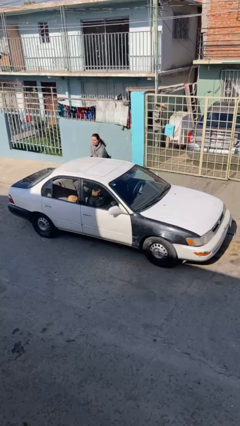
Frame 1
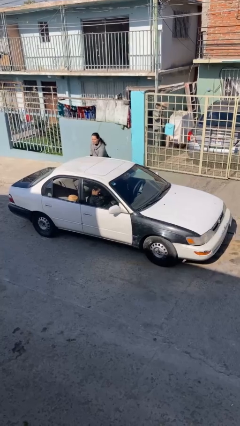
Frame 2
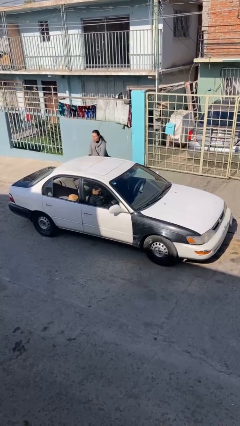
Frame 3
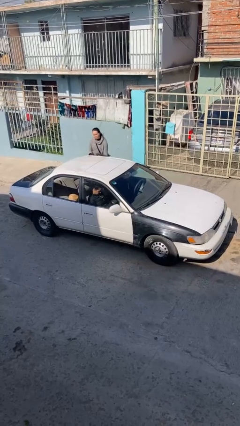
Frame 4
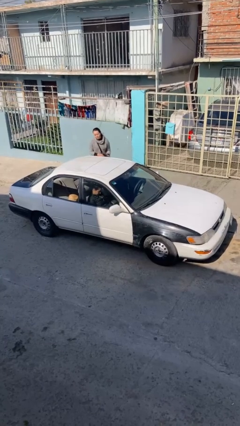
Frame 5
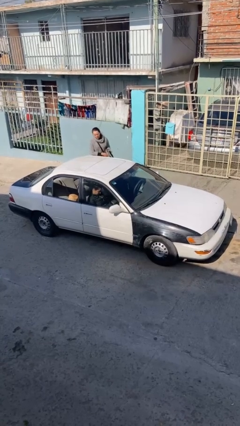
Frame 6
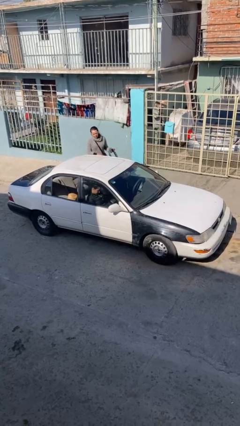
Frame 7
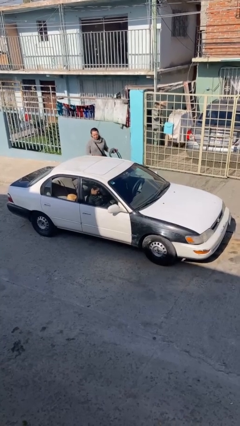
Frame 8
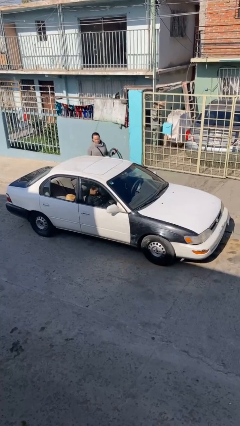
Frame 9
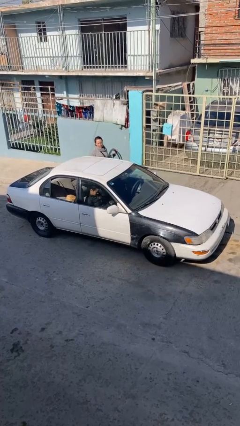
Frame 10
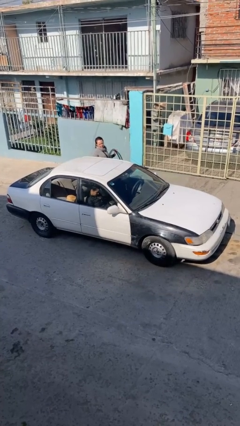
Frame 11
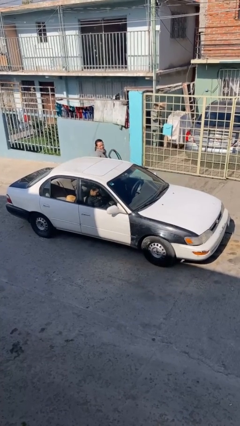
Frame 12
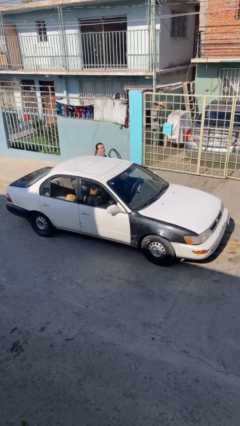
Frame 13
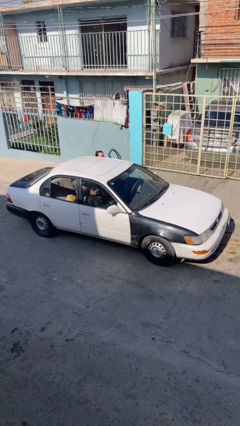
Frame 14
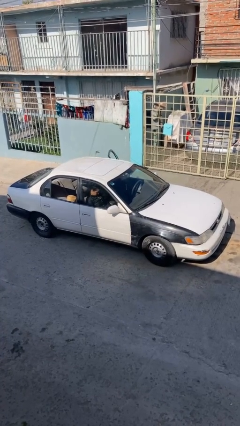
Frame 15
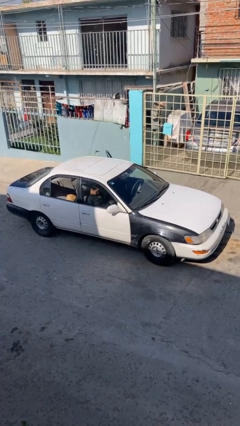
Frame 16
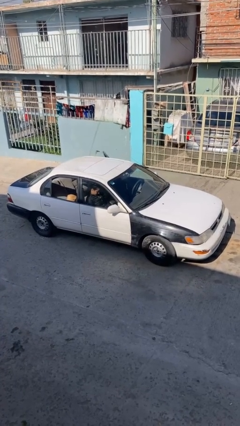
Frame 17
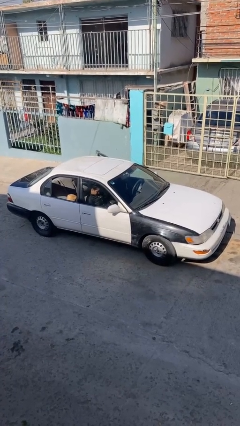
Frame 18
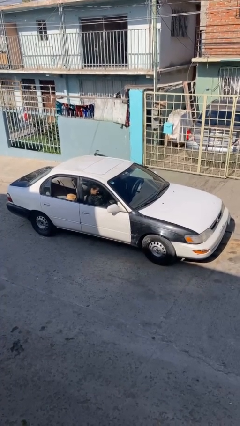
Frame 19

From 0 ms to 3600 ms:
car picks up person

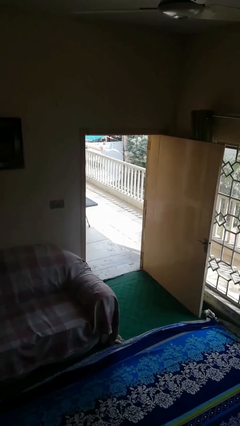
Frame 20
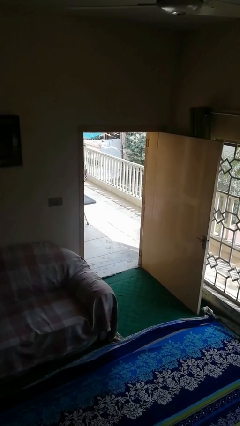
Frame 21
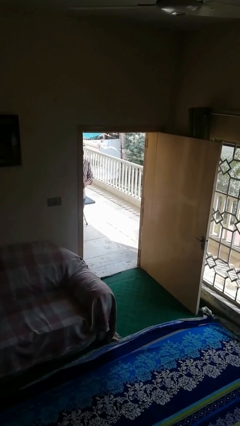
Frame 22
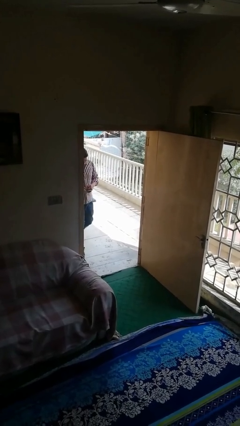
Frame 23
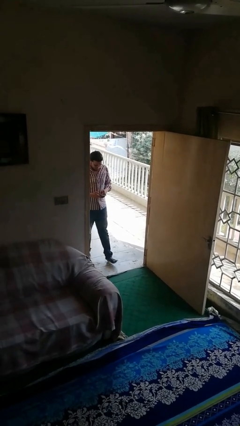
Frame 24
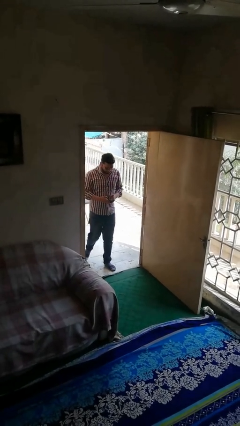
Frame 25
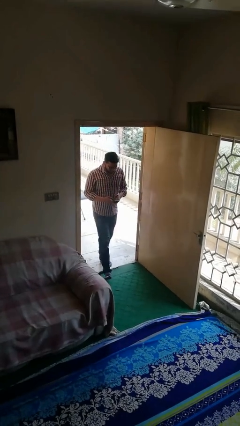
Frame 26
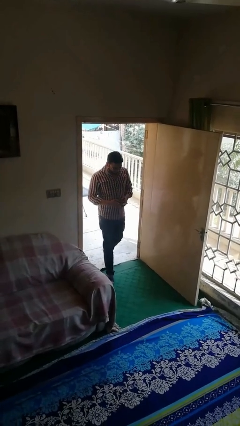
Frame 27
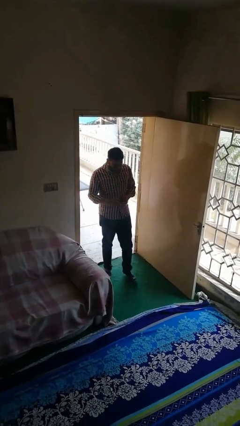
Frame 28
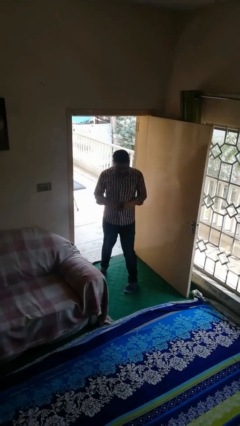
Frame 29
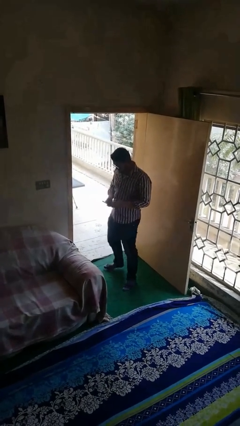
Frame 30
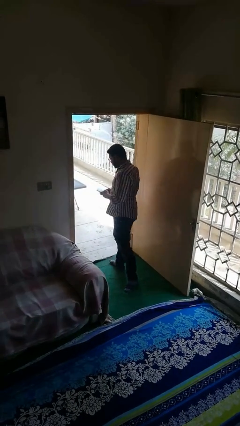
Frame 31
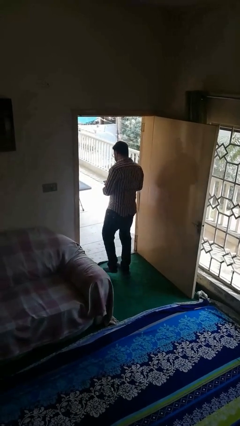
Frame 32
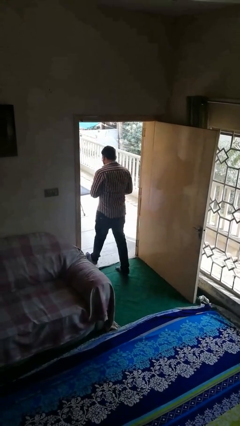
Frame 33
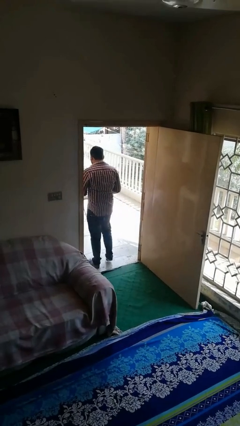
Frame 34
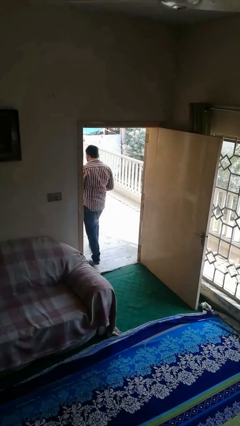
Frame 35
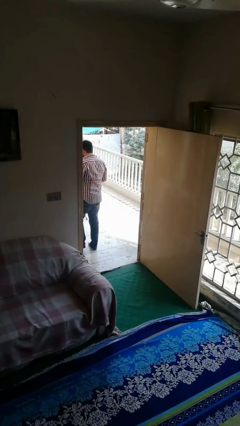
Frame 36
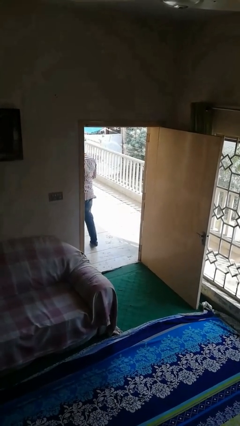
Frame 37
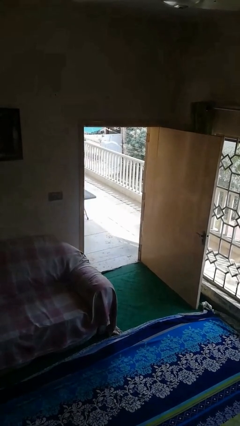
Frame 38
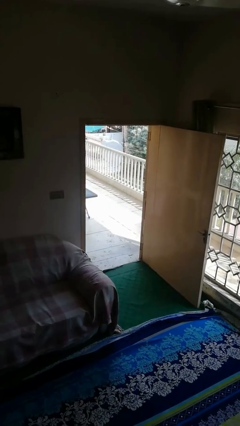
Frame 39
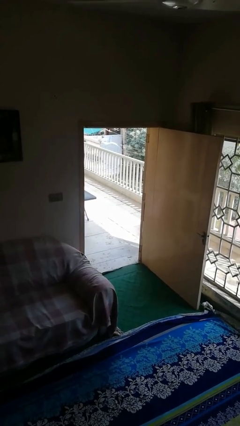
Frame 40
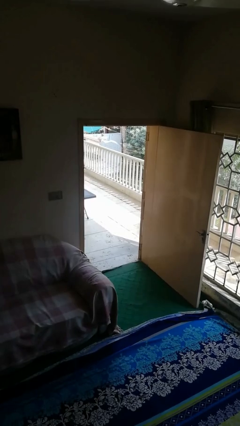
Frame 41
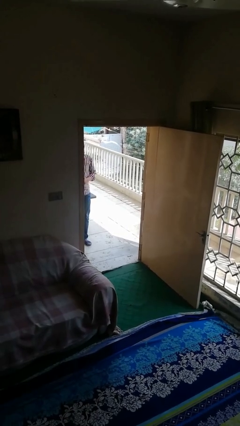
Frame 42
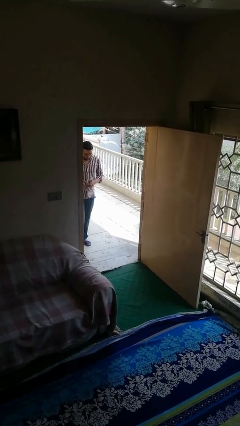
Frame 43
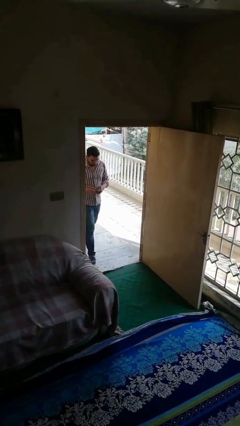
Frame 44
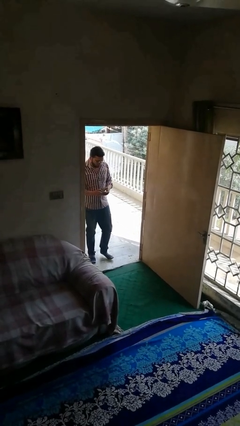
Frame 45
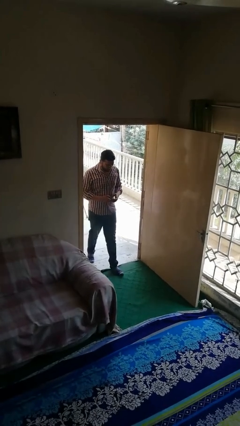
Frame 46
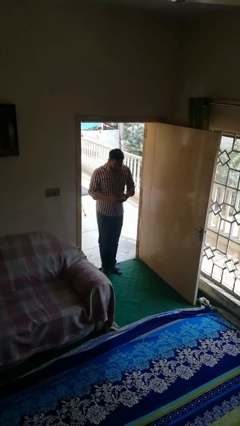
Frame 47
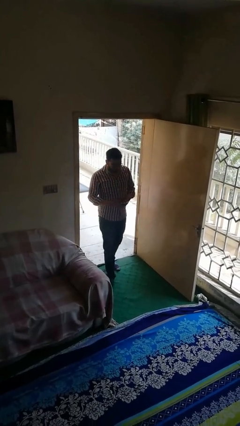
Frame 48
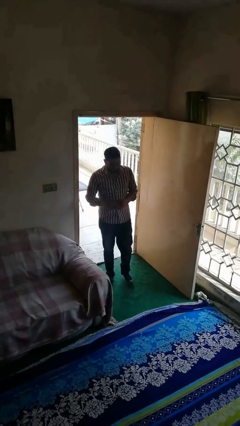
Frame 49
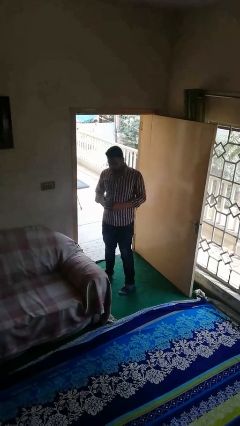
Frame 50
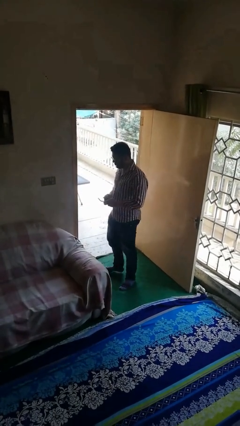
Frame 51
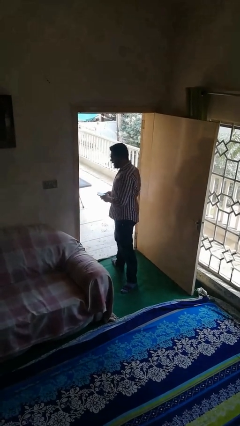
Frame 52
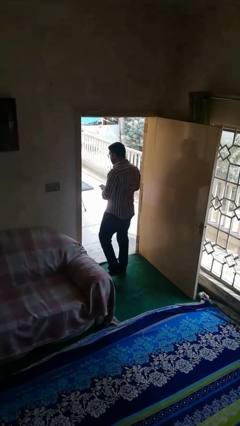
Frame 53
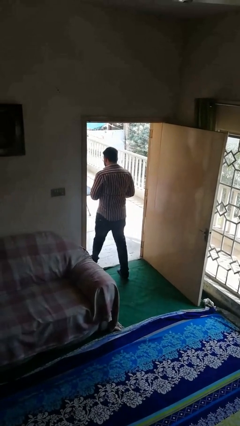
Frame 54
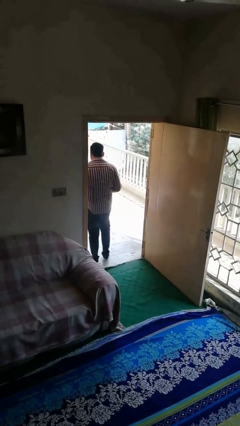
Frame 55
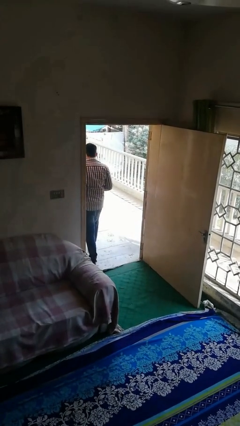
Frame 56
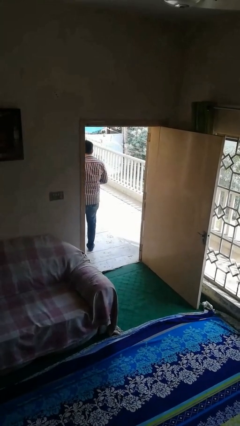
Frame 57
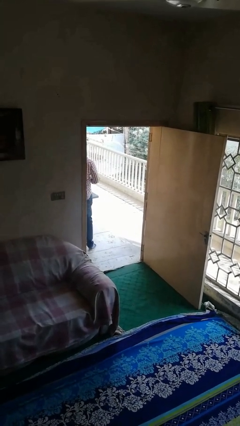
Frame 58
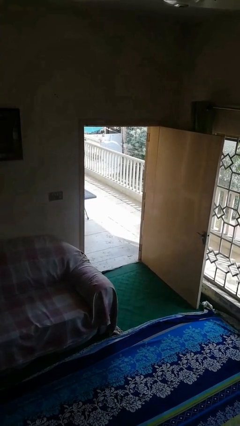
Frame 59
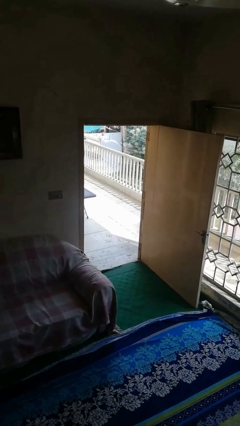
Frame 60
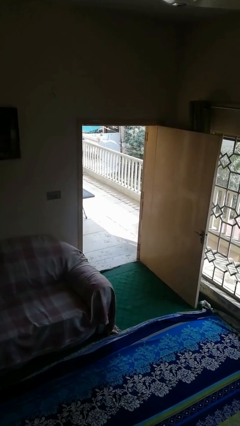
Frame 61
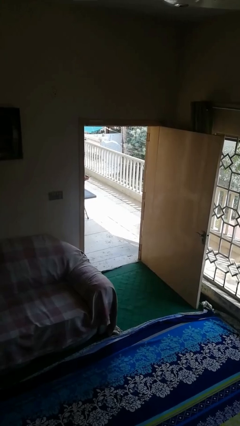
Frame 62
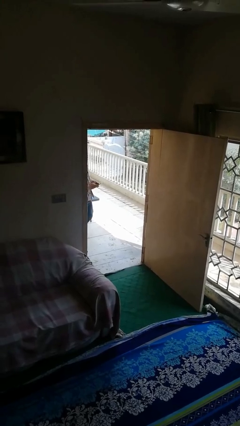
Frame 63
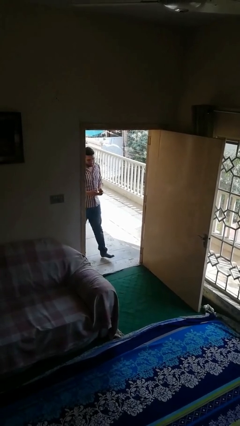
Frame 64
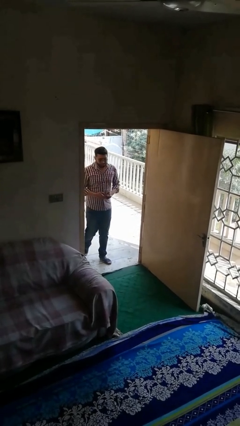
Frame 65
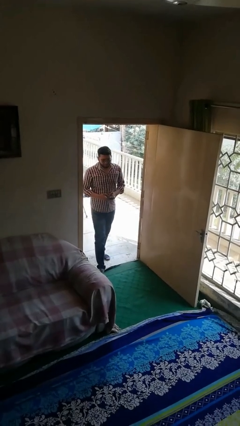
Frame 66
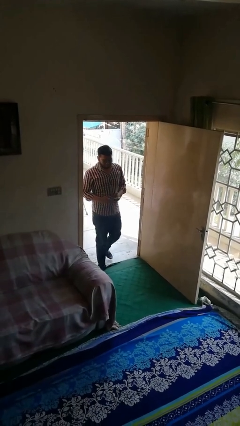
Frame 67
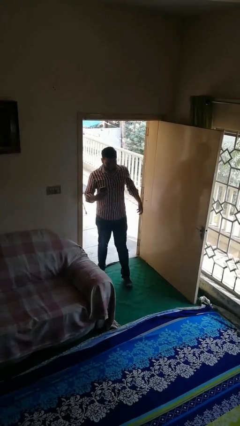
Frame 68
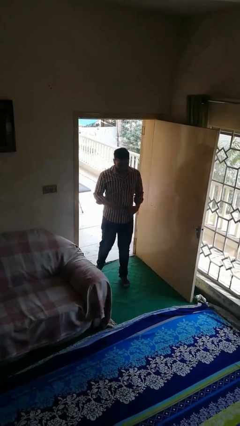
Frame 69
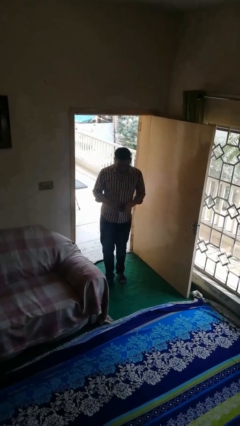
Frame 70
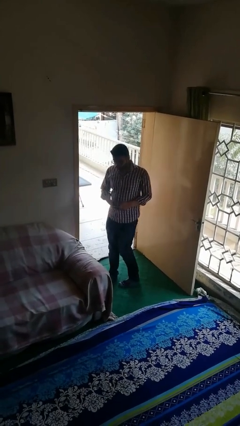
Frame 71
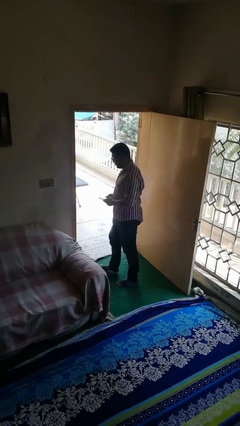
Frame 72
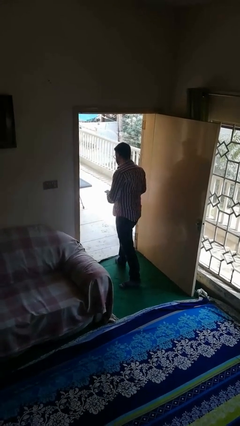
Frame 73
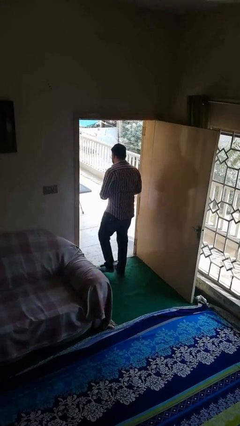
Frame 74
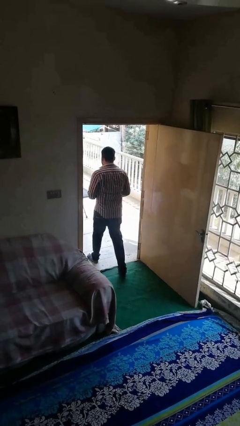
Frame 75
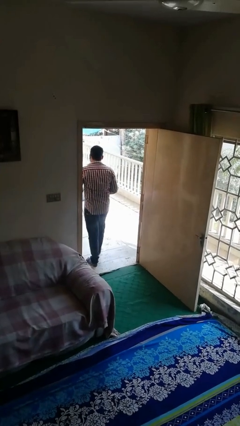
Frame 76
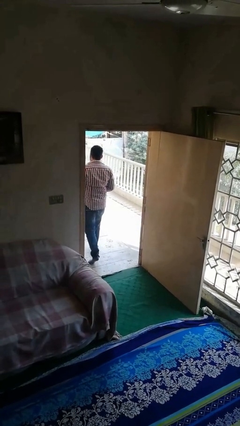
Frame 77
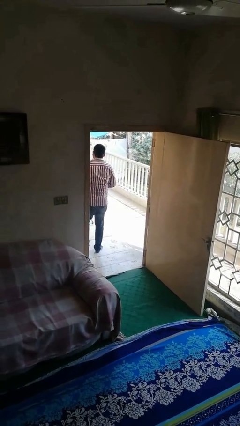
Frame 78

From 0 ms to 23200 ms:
person texts on phone

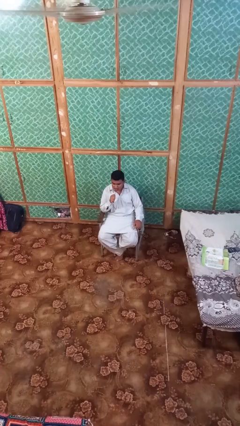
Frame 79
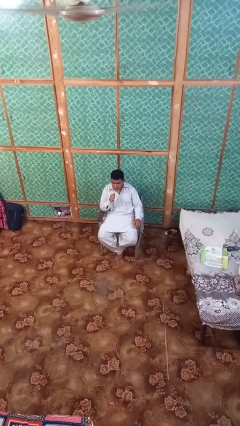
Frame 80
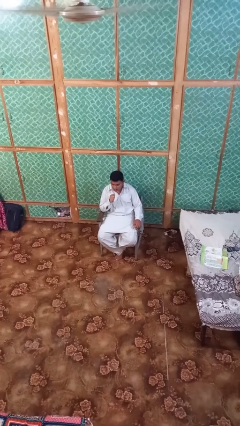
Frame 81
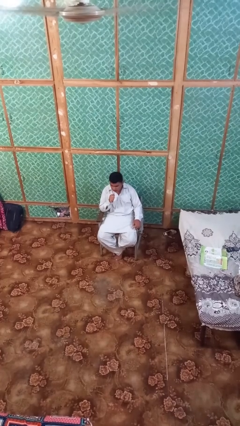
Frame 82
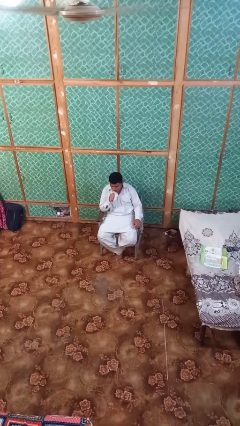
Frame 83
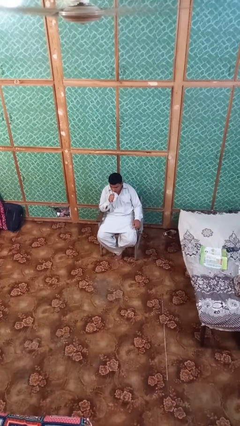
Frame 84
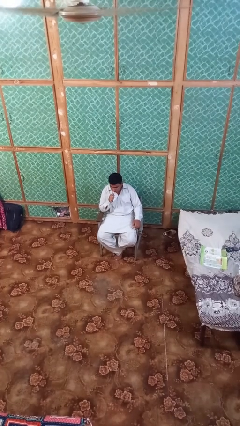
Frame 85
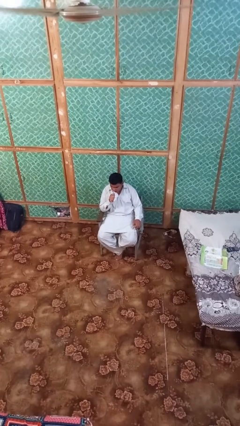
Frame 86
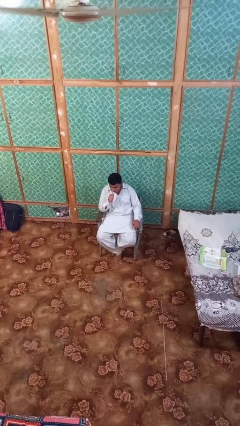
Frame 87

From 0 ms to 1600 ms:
person vapes

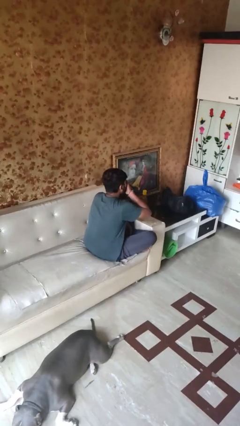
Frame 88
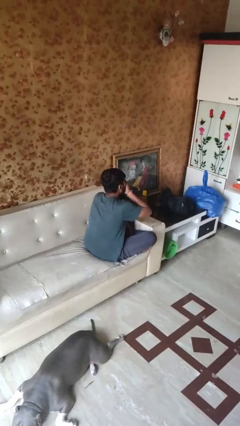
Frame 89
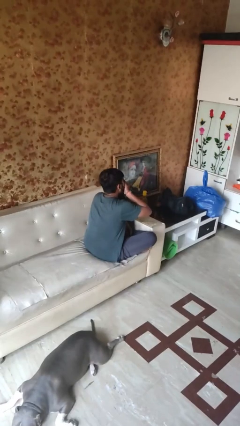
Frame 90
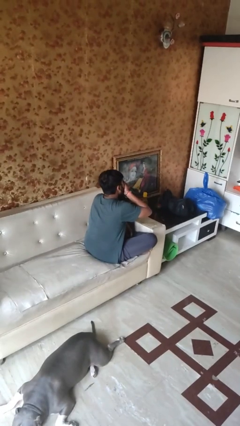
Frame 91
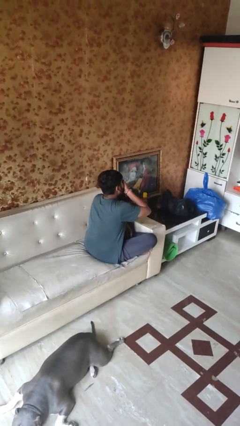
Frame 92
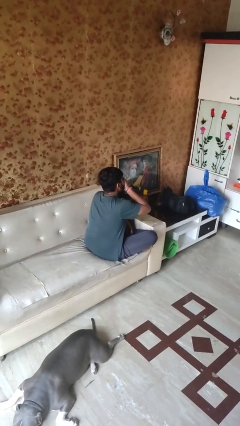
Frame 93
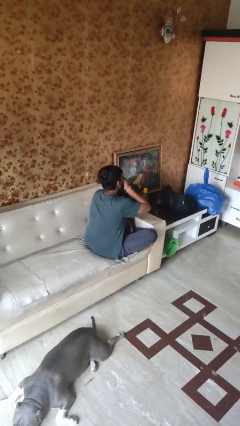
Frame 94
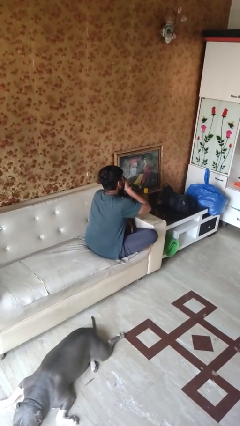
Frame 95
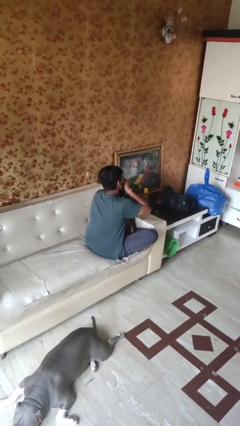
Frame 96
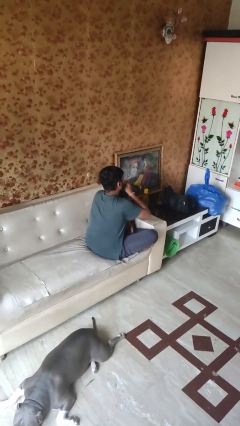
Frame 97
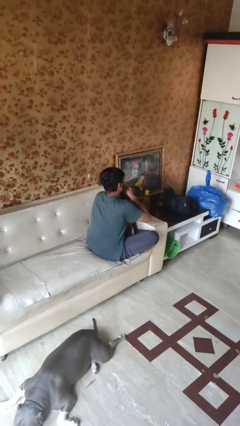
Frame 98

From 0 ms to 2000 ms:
person yawns
